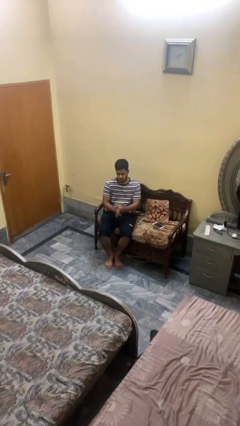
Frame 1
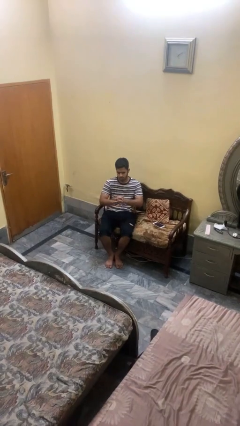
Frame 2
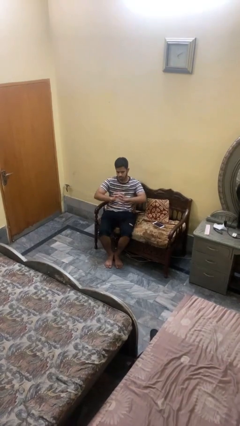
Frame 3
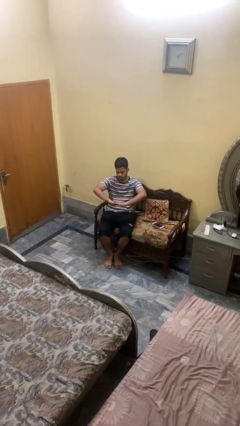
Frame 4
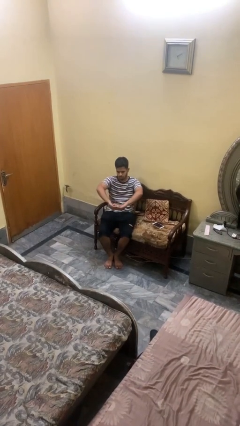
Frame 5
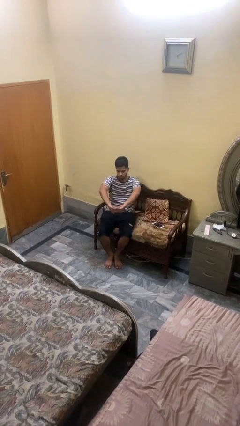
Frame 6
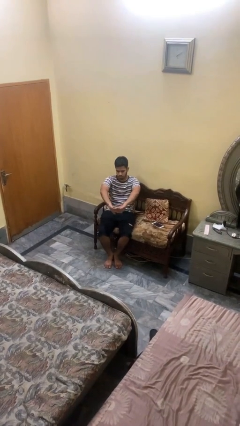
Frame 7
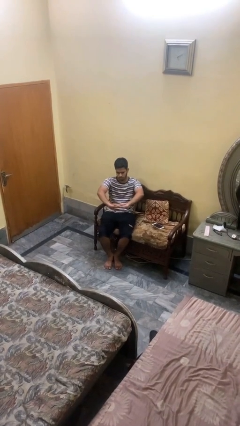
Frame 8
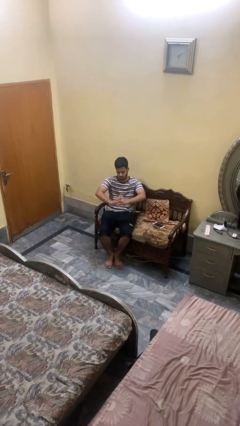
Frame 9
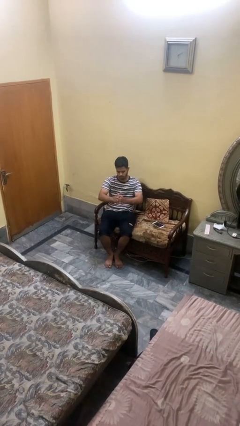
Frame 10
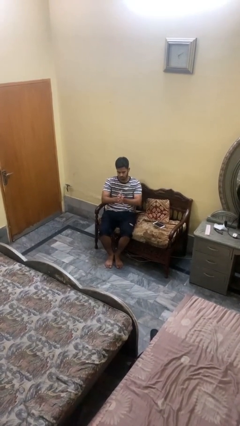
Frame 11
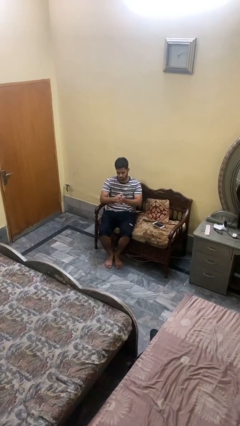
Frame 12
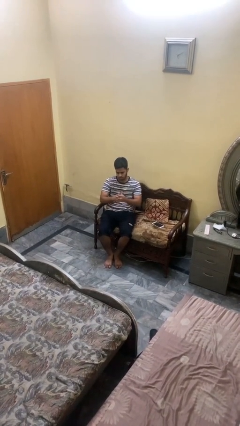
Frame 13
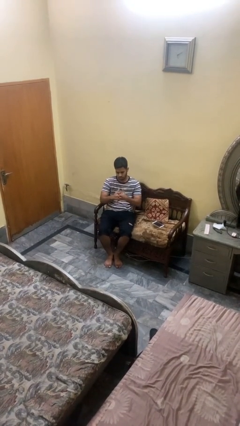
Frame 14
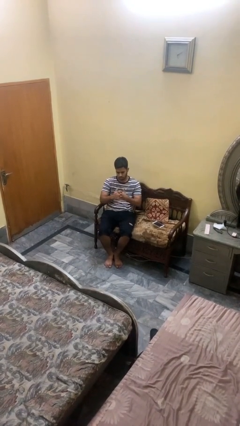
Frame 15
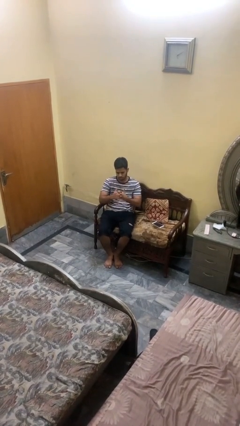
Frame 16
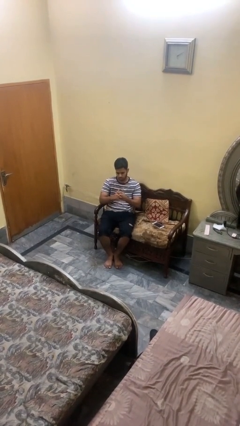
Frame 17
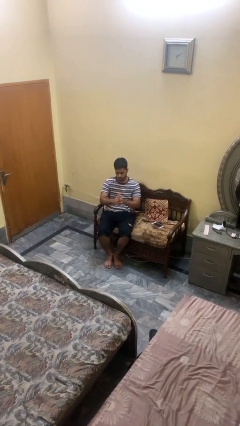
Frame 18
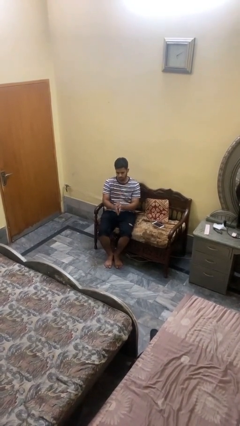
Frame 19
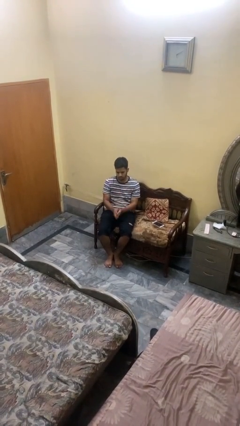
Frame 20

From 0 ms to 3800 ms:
person cracks knuckles

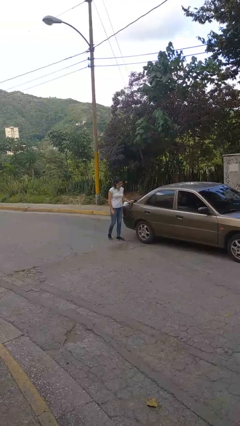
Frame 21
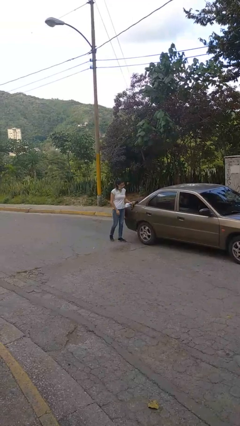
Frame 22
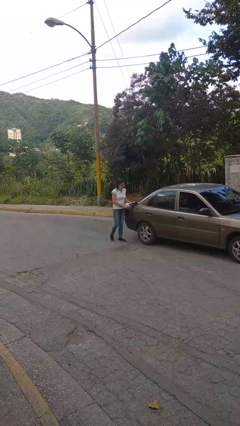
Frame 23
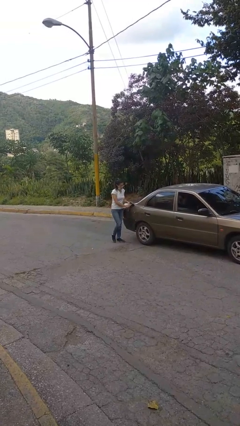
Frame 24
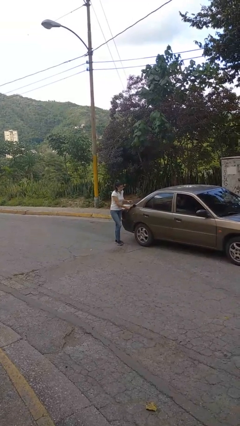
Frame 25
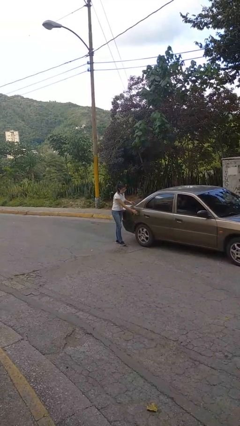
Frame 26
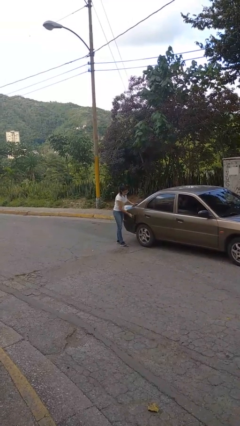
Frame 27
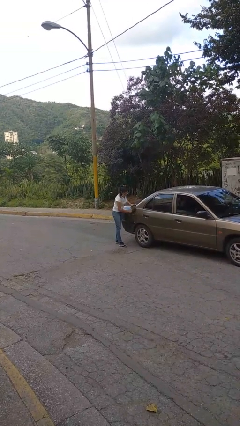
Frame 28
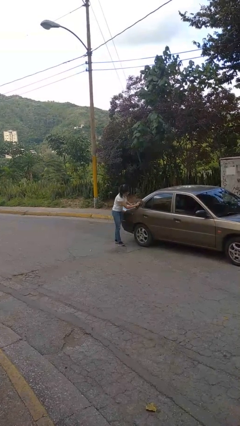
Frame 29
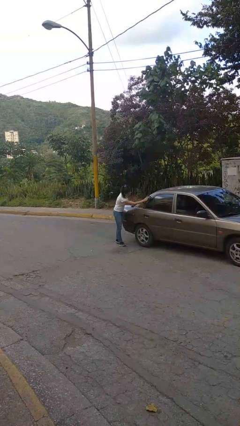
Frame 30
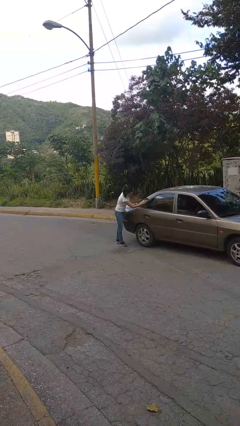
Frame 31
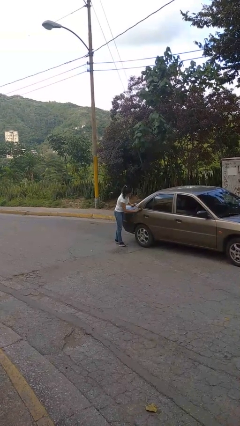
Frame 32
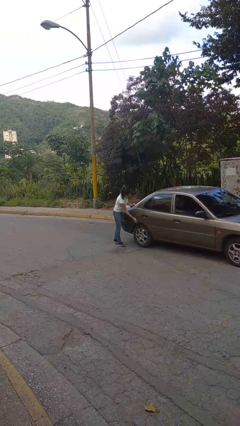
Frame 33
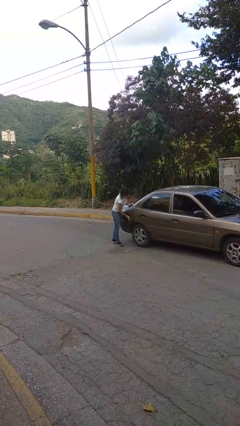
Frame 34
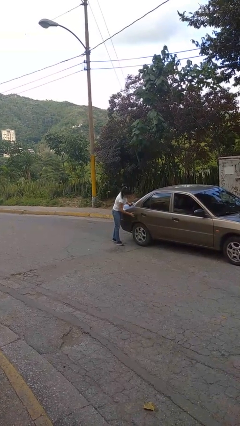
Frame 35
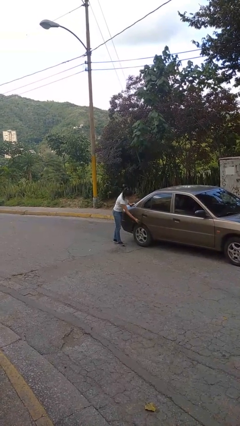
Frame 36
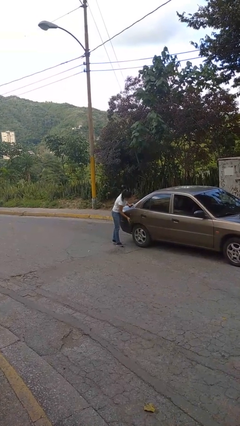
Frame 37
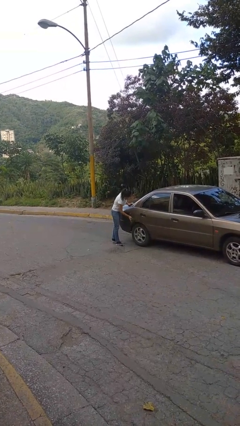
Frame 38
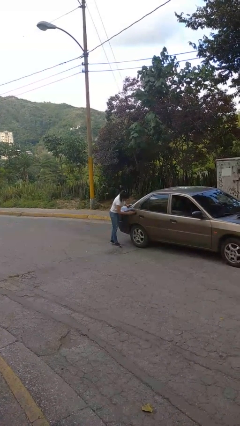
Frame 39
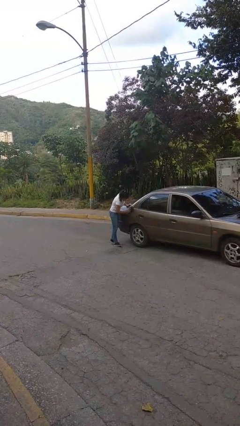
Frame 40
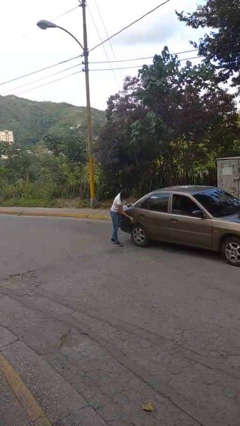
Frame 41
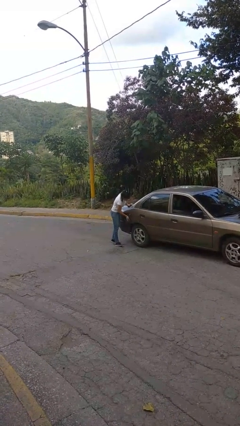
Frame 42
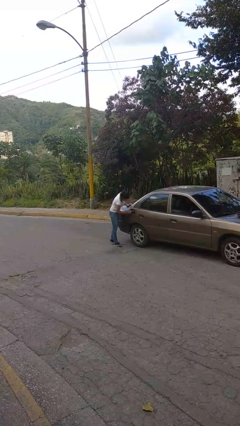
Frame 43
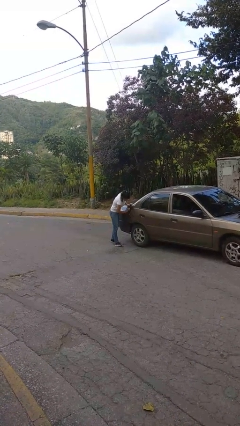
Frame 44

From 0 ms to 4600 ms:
person polishes car with rag

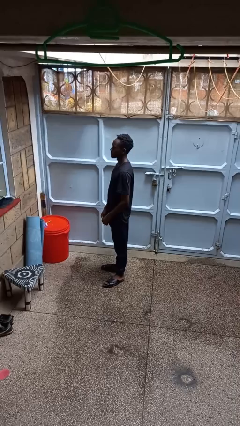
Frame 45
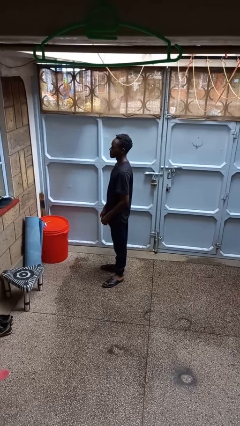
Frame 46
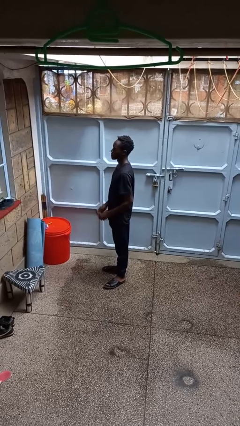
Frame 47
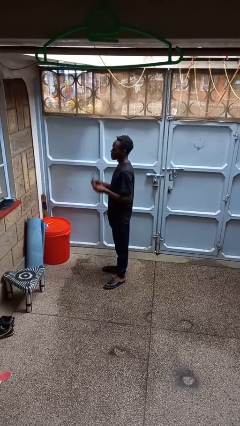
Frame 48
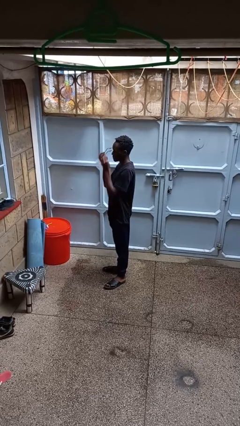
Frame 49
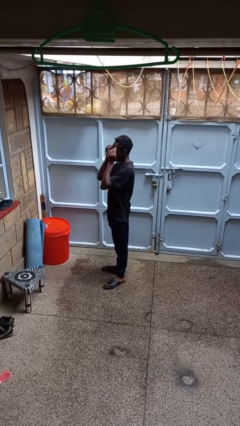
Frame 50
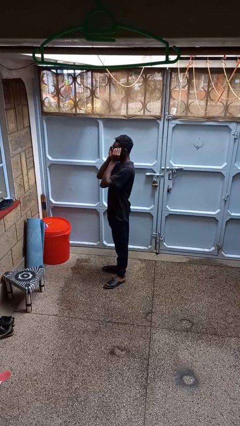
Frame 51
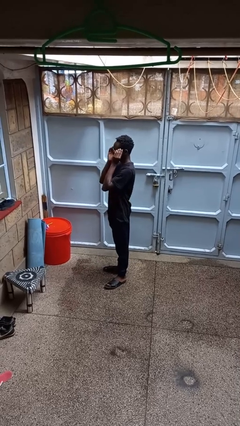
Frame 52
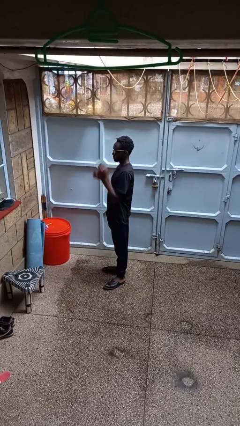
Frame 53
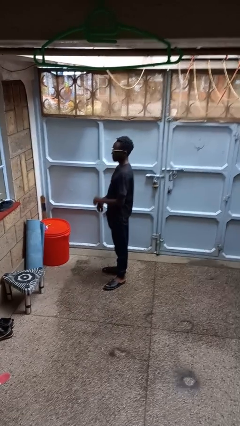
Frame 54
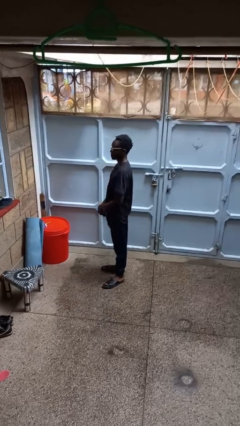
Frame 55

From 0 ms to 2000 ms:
person puts on glasses

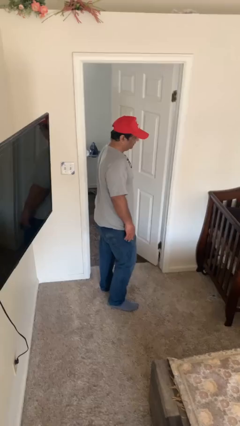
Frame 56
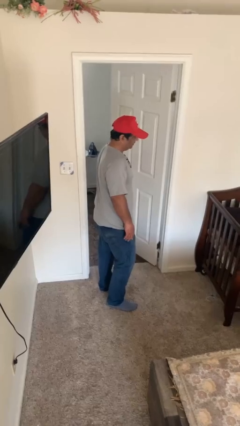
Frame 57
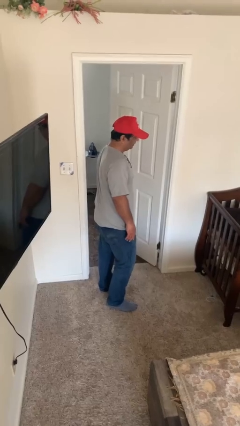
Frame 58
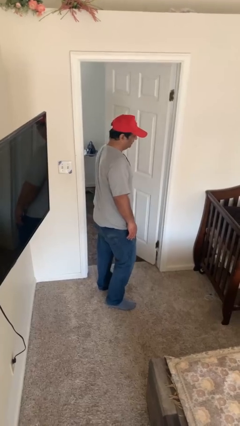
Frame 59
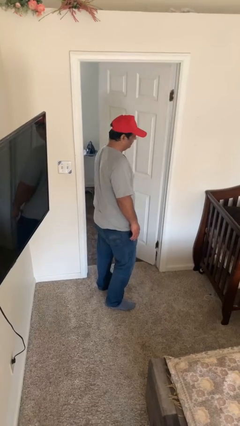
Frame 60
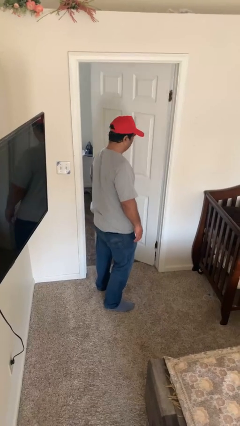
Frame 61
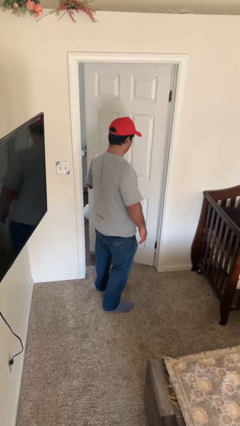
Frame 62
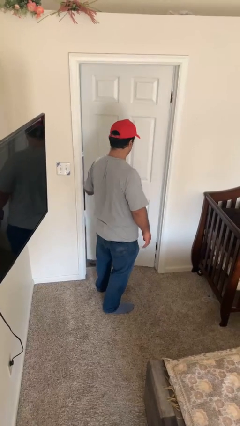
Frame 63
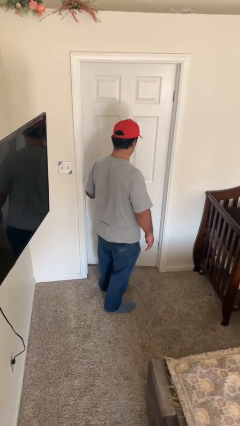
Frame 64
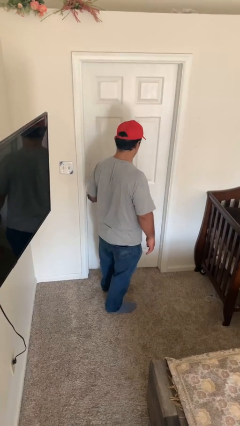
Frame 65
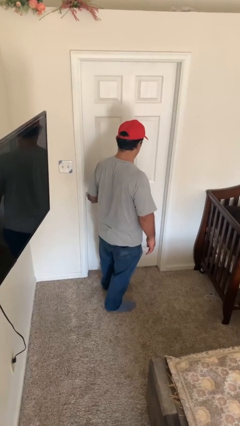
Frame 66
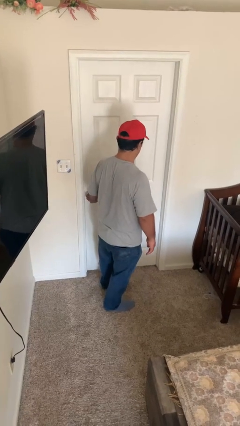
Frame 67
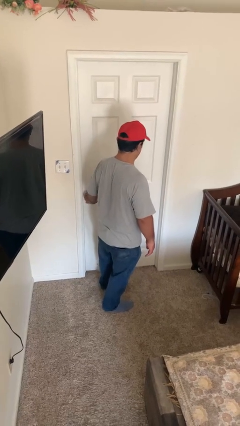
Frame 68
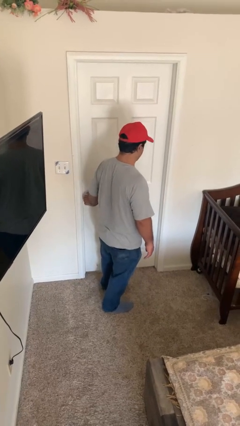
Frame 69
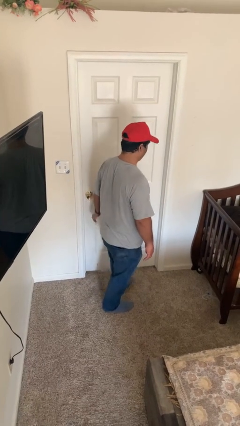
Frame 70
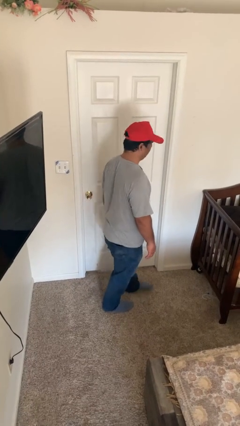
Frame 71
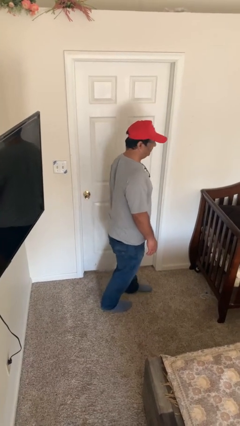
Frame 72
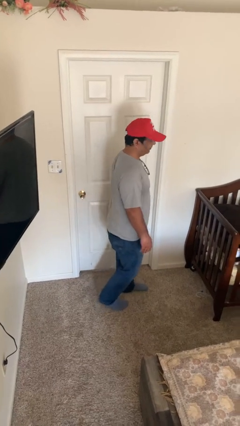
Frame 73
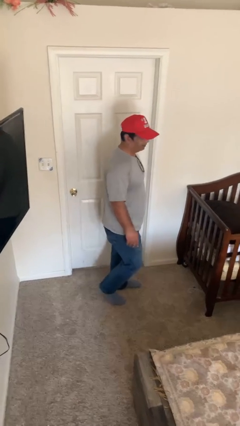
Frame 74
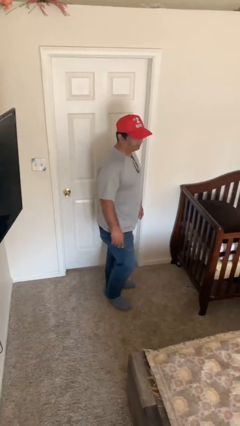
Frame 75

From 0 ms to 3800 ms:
person closes facility door

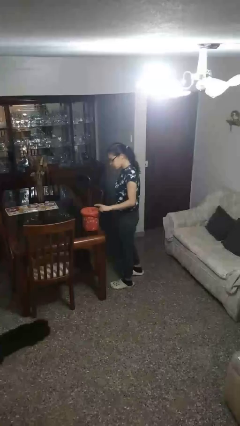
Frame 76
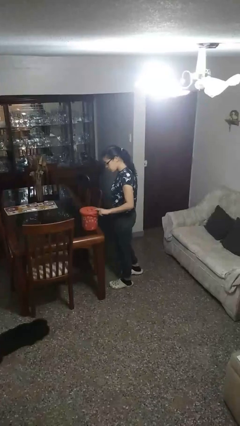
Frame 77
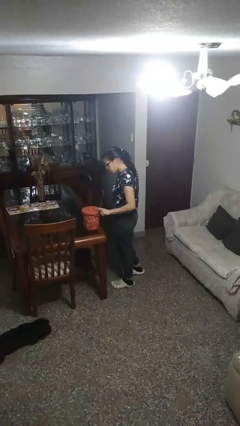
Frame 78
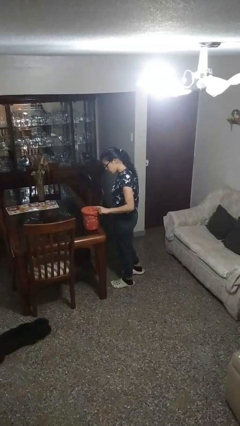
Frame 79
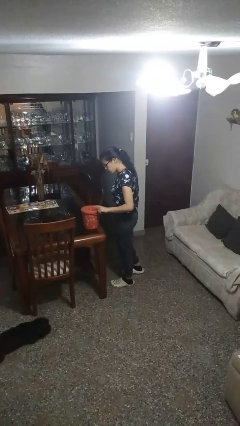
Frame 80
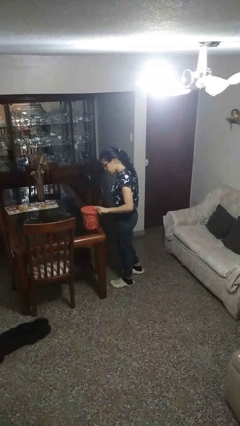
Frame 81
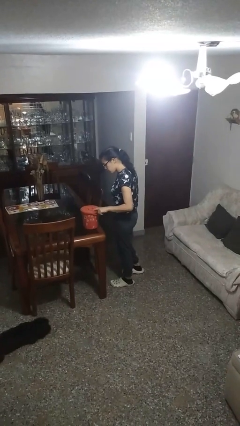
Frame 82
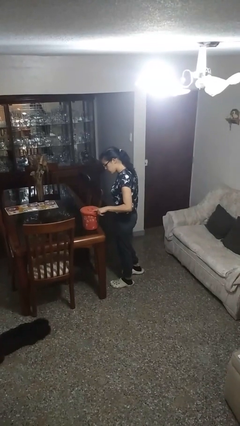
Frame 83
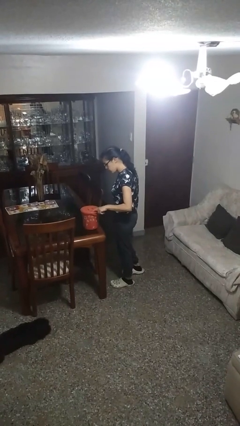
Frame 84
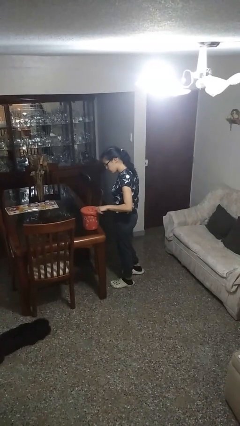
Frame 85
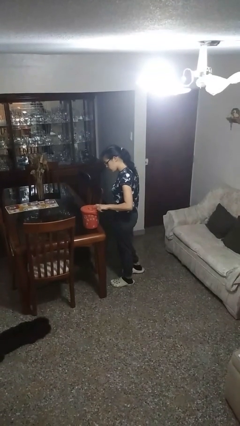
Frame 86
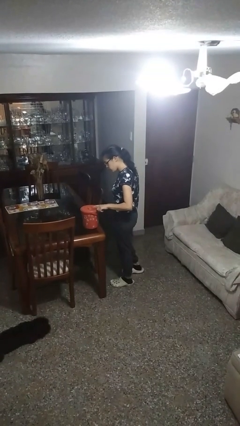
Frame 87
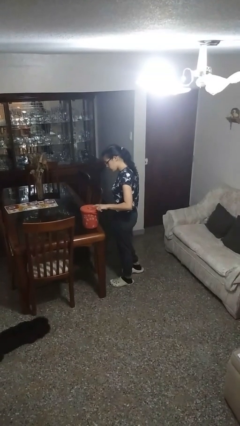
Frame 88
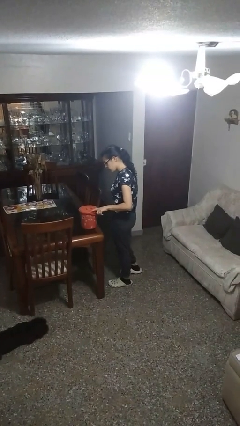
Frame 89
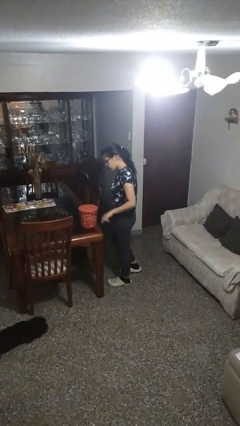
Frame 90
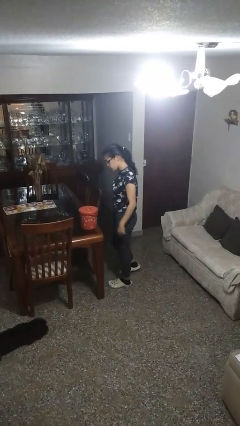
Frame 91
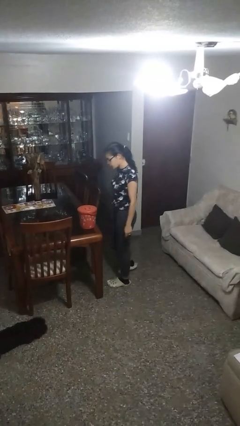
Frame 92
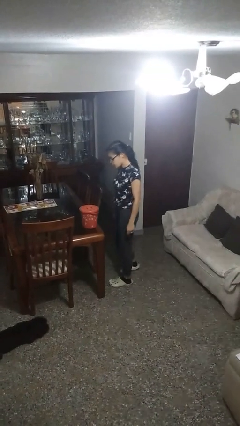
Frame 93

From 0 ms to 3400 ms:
person taps object with finger
